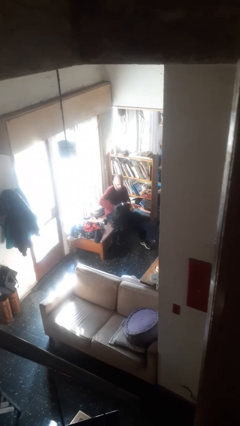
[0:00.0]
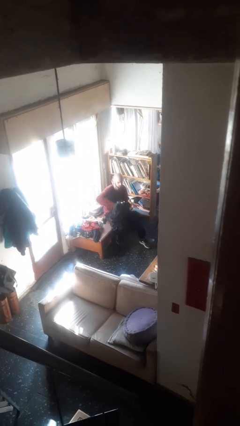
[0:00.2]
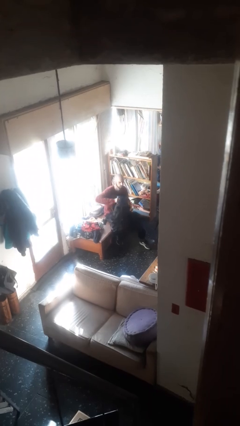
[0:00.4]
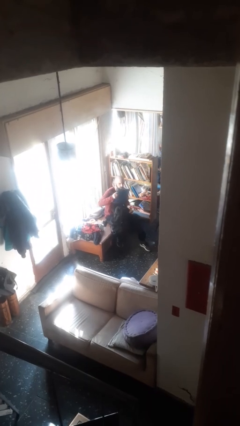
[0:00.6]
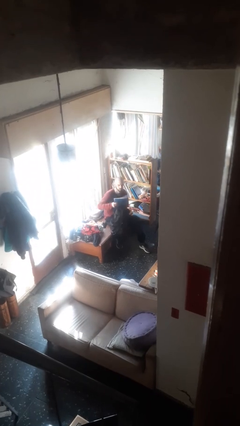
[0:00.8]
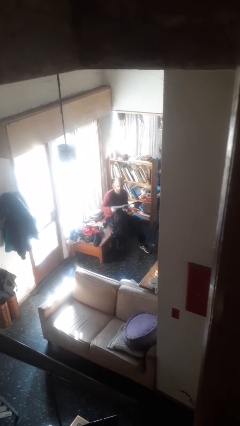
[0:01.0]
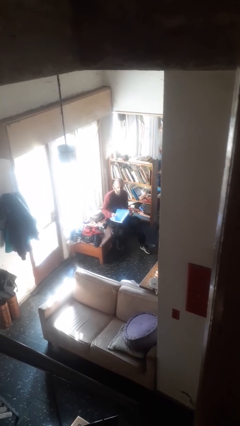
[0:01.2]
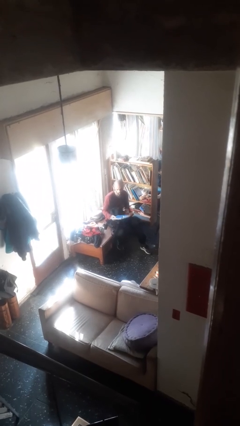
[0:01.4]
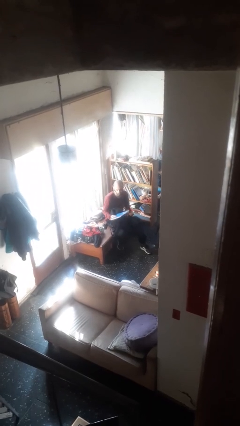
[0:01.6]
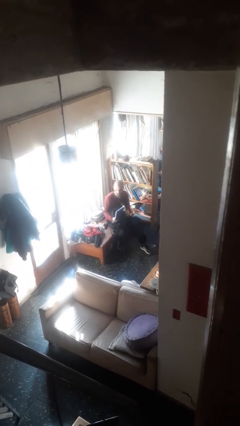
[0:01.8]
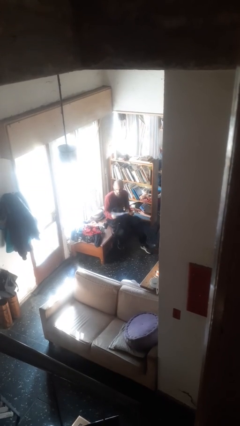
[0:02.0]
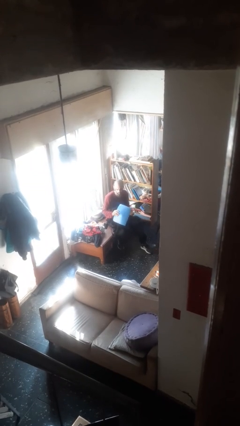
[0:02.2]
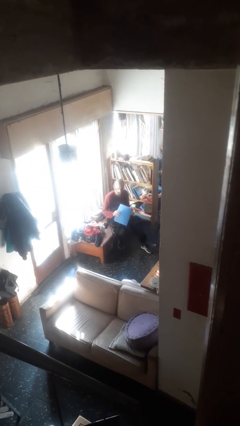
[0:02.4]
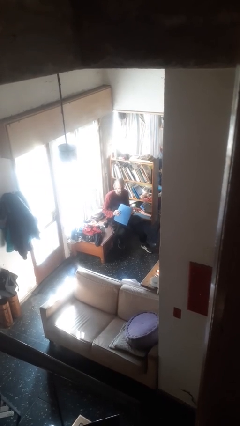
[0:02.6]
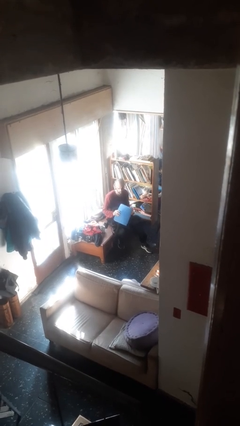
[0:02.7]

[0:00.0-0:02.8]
person takes object from backpack

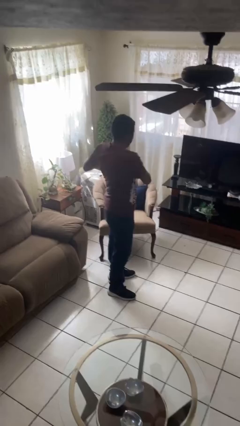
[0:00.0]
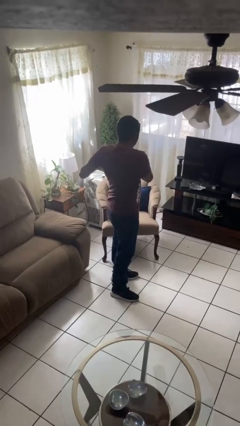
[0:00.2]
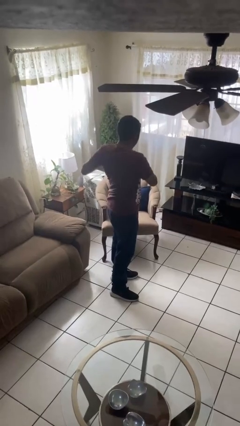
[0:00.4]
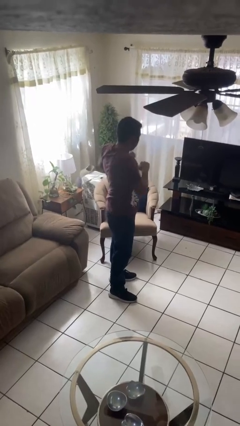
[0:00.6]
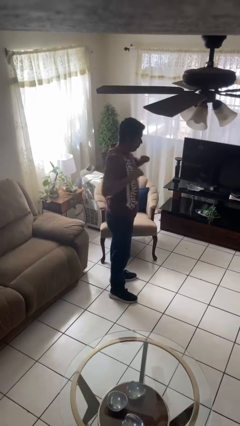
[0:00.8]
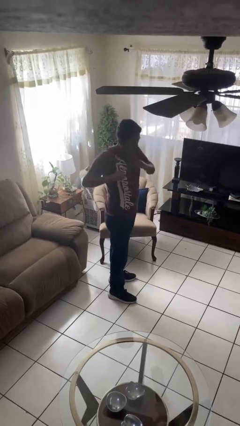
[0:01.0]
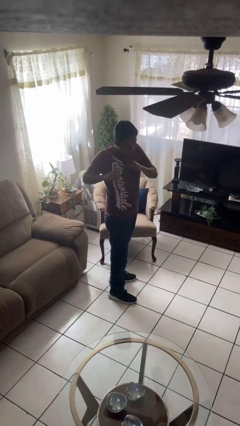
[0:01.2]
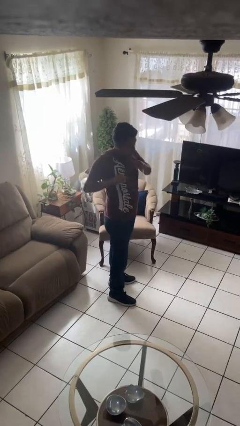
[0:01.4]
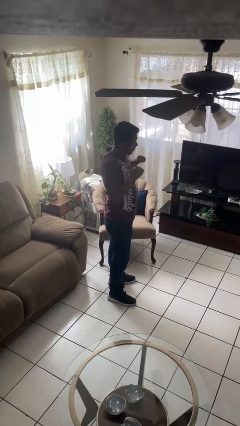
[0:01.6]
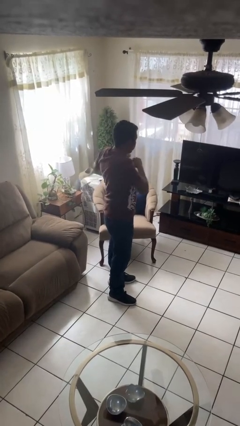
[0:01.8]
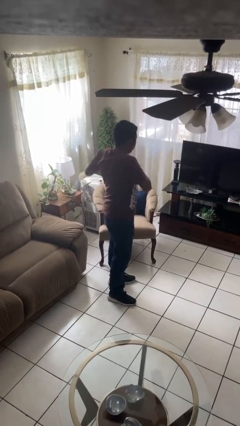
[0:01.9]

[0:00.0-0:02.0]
person stretches arms to side

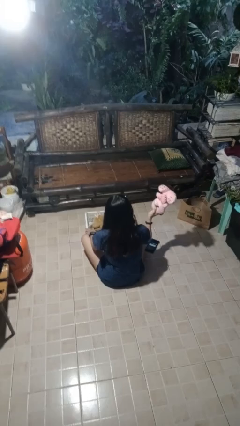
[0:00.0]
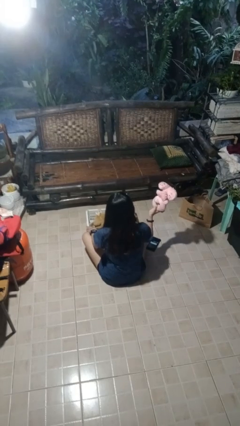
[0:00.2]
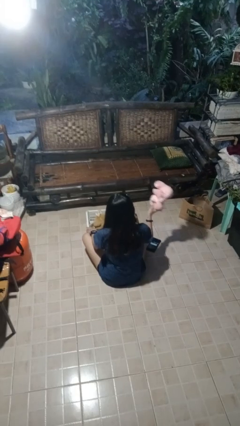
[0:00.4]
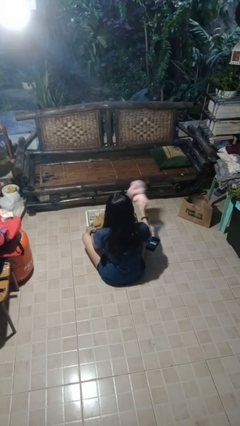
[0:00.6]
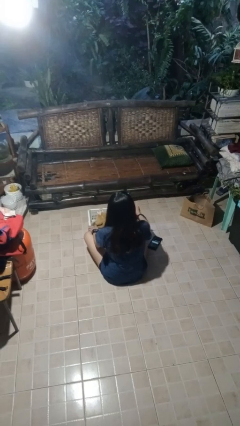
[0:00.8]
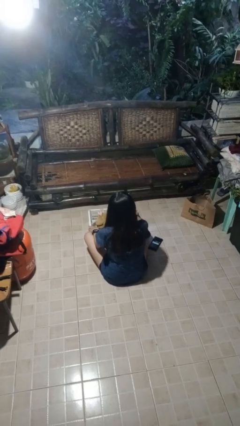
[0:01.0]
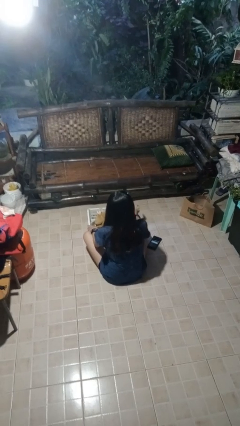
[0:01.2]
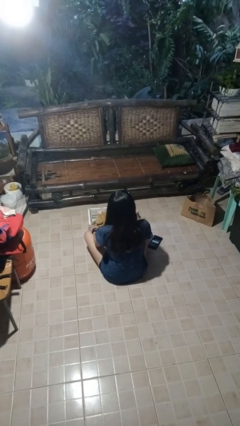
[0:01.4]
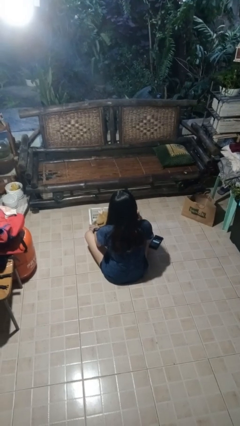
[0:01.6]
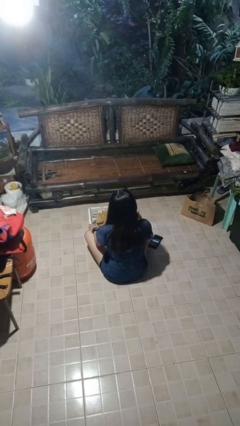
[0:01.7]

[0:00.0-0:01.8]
person puts object into basket

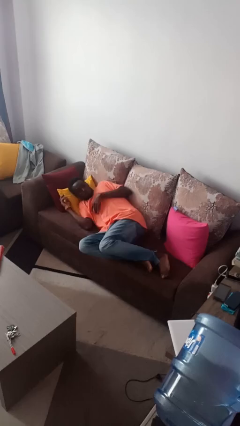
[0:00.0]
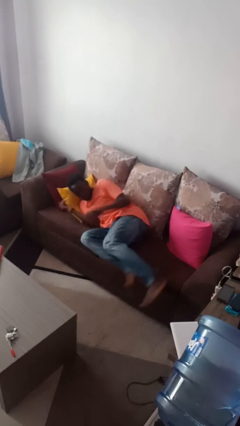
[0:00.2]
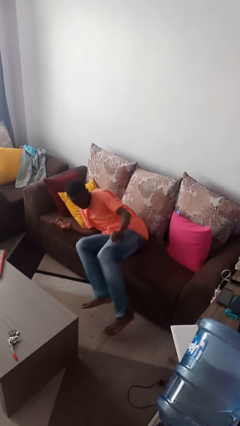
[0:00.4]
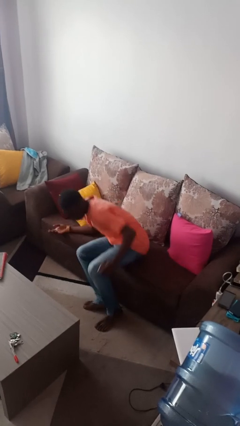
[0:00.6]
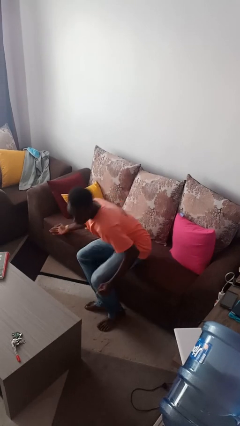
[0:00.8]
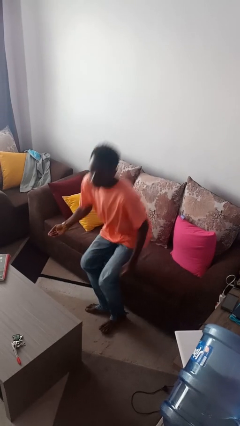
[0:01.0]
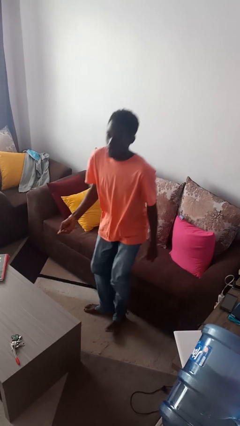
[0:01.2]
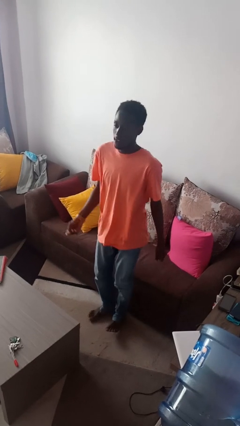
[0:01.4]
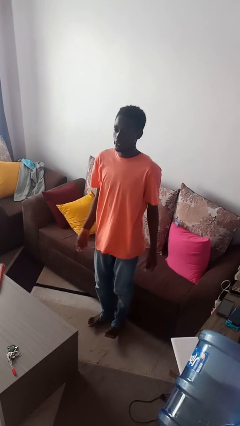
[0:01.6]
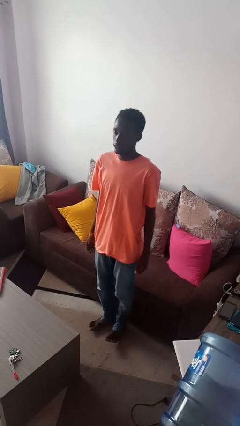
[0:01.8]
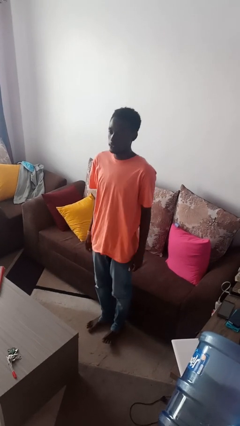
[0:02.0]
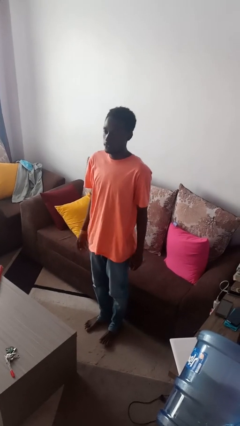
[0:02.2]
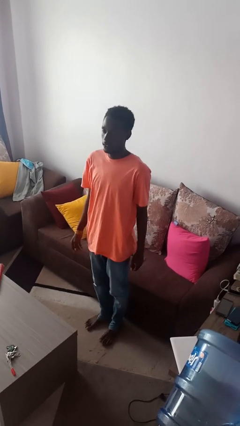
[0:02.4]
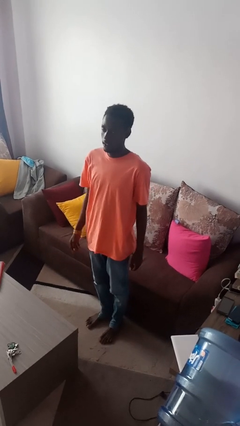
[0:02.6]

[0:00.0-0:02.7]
person stands up

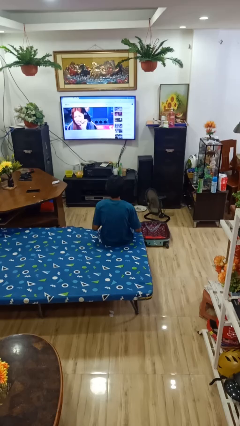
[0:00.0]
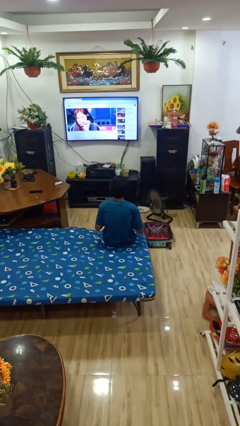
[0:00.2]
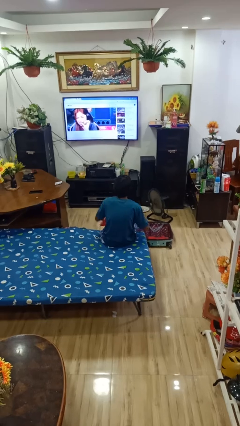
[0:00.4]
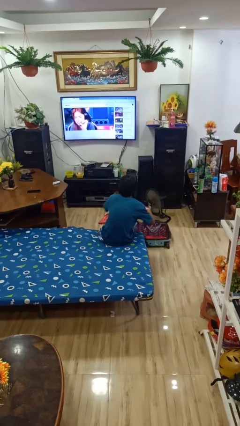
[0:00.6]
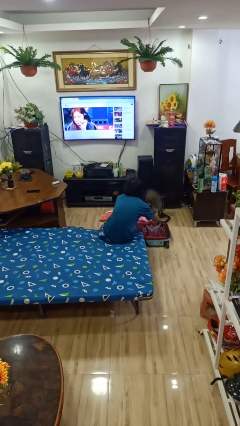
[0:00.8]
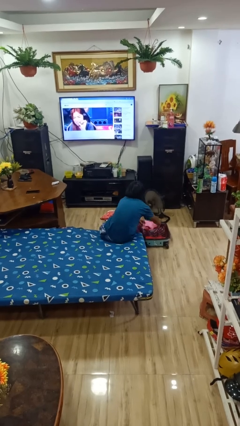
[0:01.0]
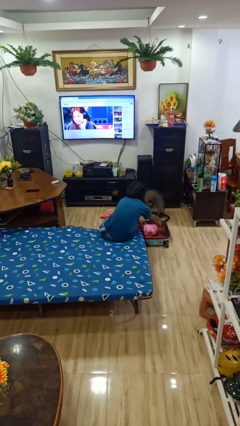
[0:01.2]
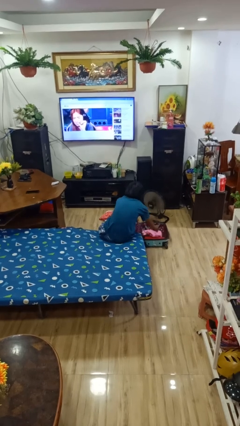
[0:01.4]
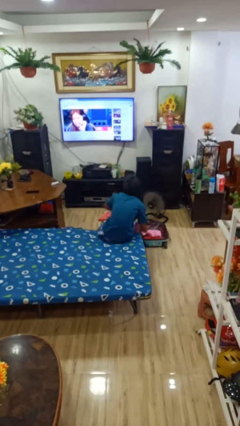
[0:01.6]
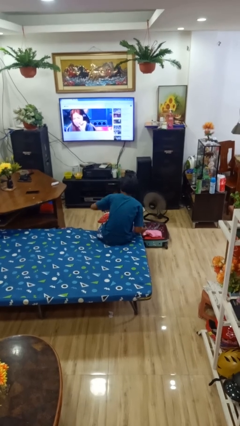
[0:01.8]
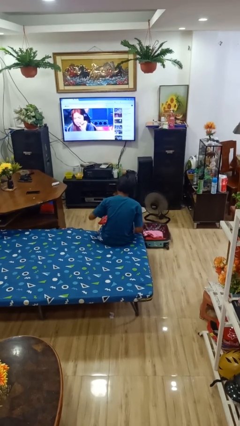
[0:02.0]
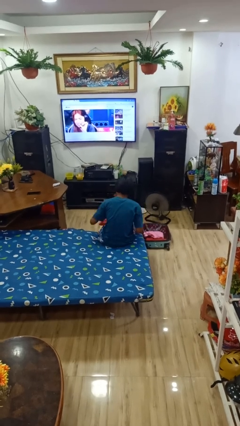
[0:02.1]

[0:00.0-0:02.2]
person loads clothes into suitcase

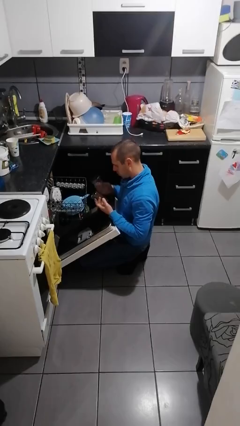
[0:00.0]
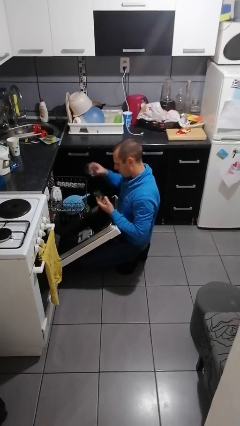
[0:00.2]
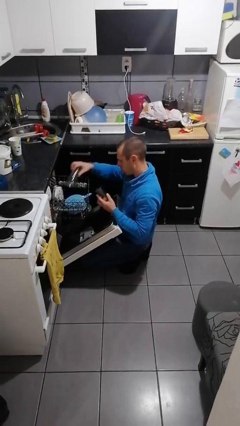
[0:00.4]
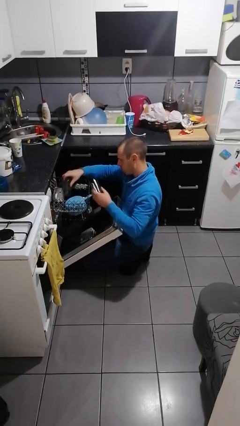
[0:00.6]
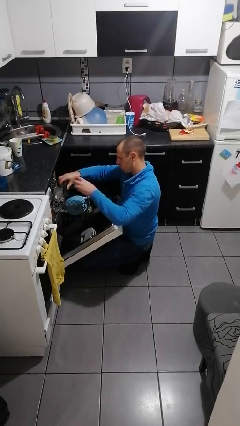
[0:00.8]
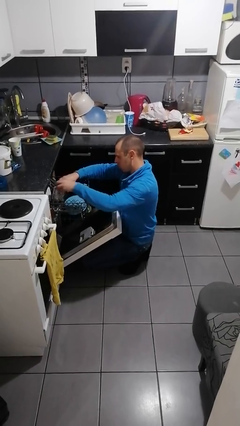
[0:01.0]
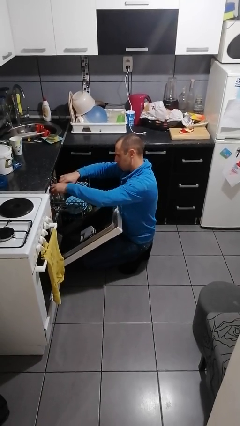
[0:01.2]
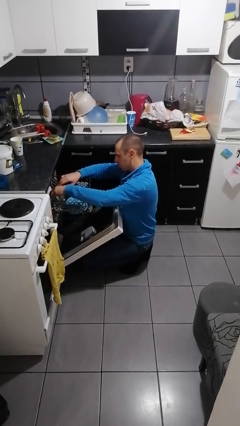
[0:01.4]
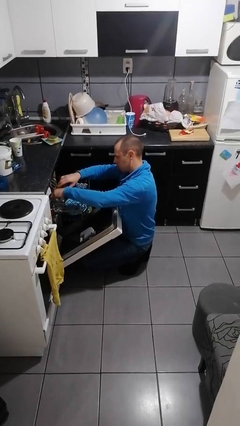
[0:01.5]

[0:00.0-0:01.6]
person loads dishwasher

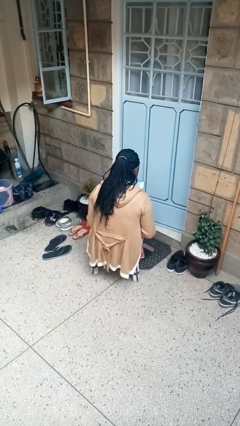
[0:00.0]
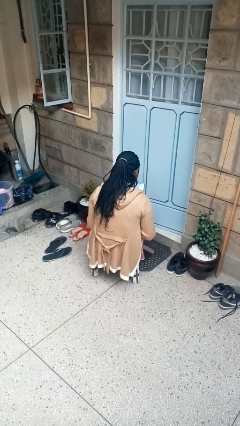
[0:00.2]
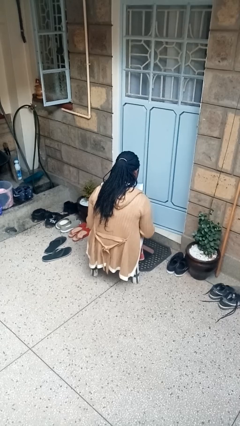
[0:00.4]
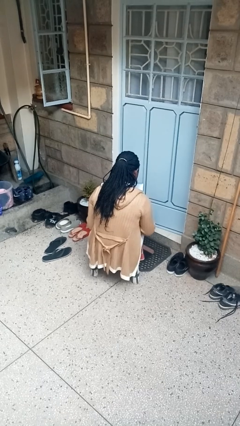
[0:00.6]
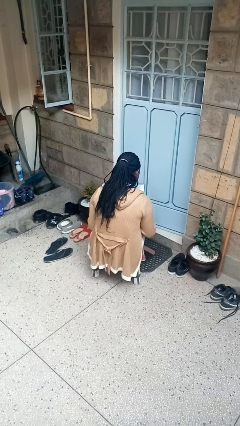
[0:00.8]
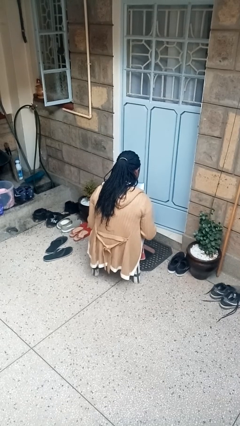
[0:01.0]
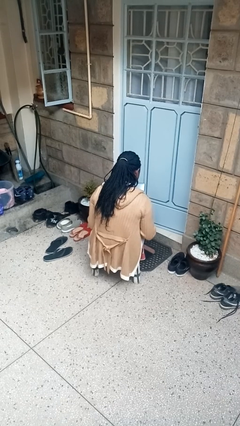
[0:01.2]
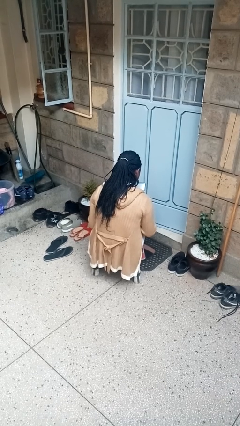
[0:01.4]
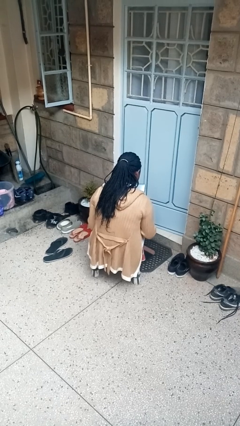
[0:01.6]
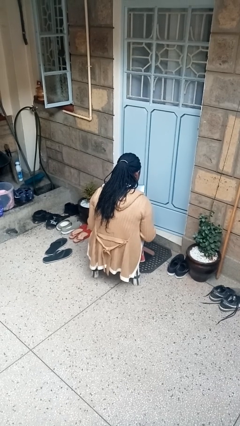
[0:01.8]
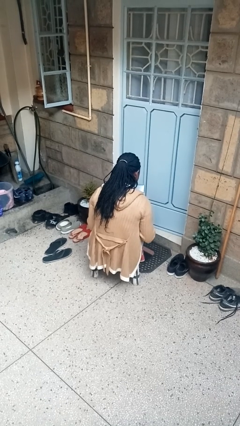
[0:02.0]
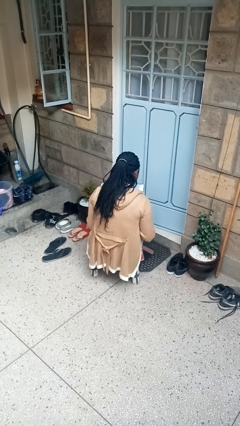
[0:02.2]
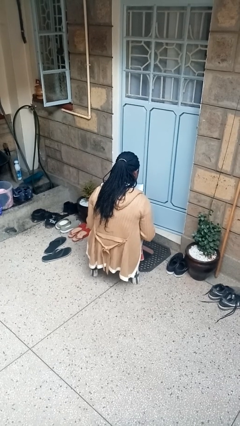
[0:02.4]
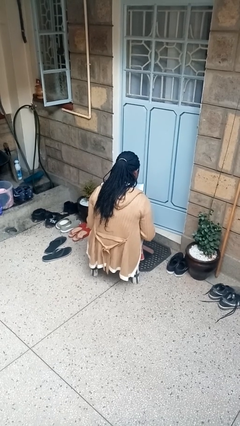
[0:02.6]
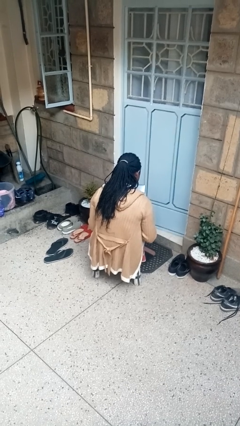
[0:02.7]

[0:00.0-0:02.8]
person interacts with tablet

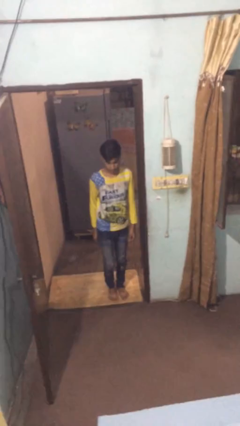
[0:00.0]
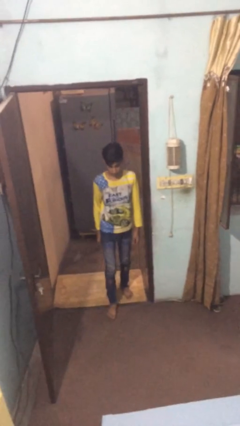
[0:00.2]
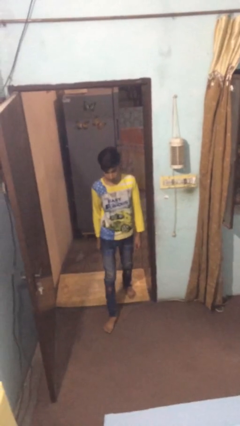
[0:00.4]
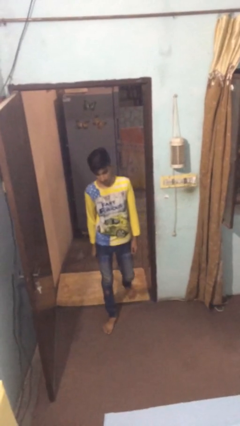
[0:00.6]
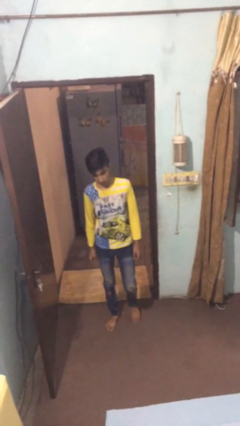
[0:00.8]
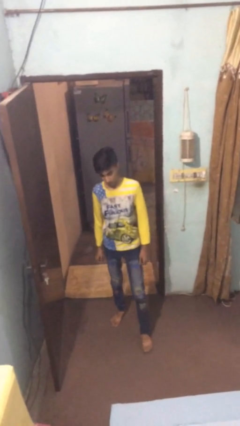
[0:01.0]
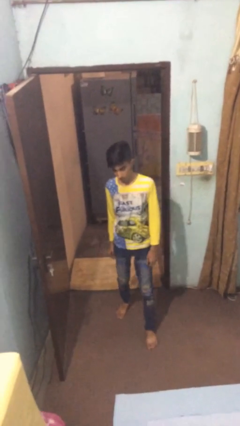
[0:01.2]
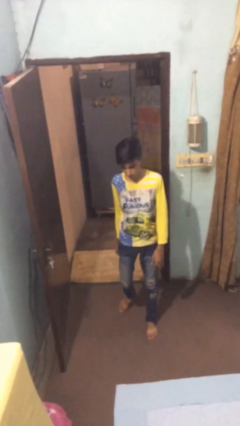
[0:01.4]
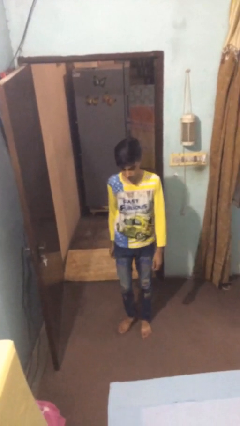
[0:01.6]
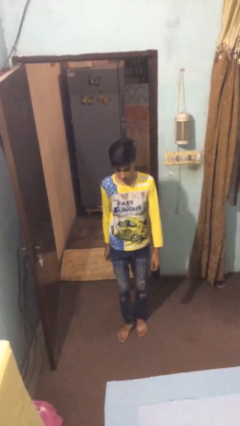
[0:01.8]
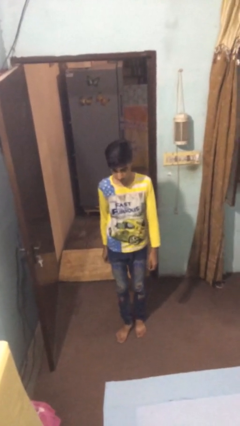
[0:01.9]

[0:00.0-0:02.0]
person enters scene through structure
